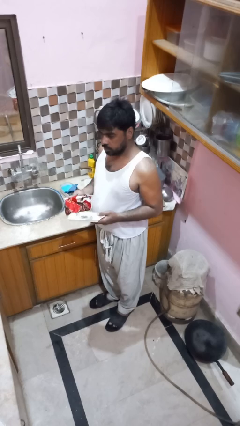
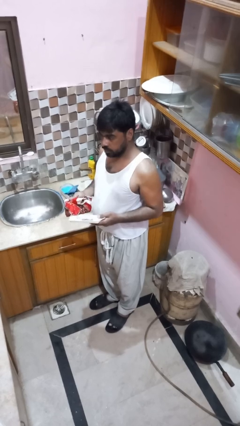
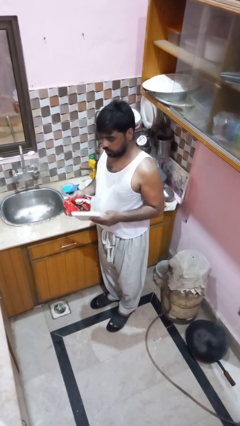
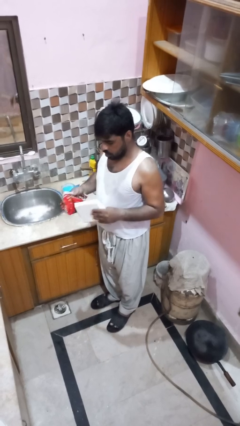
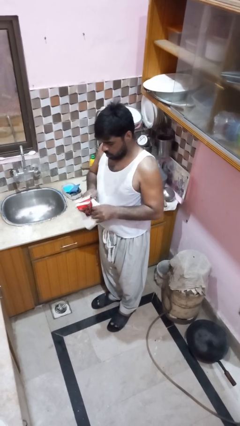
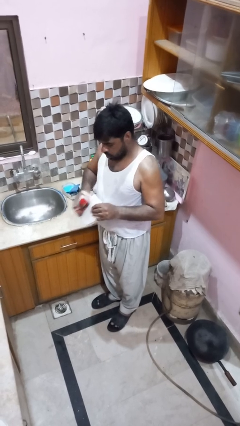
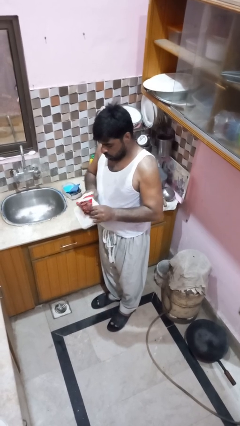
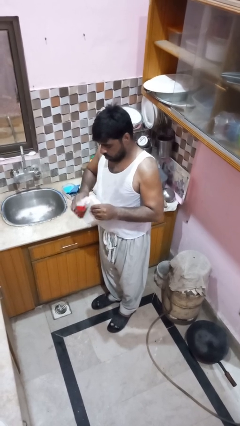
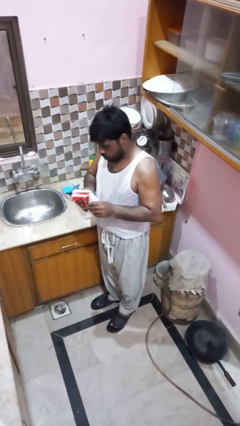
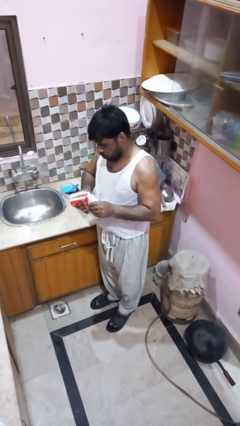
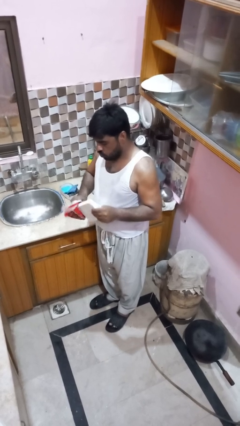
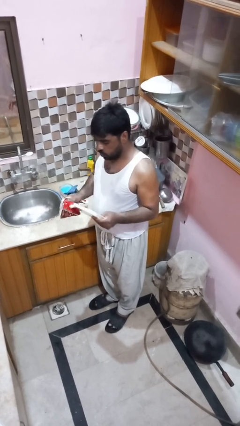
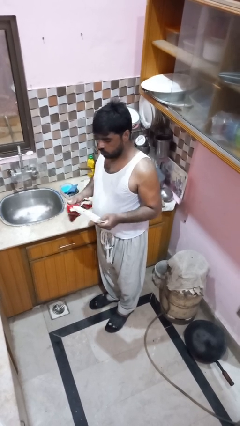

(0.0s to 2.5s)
person dries dish

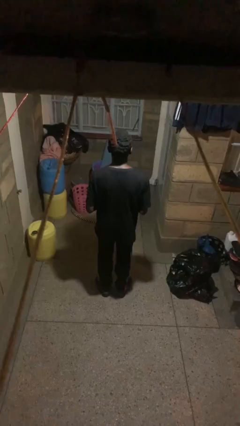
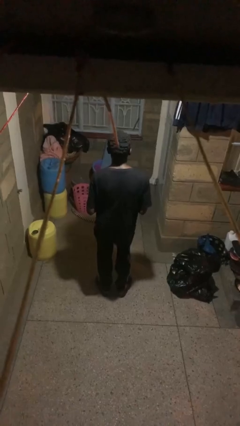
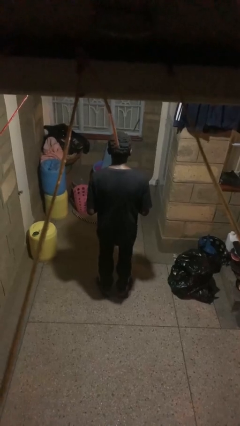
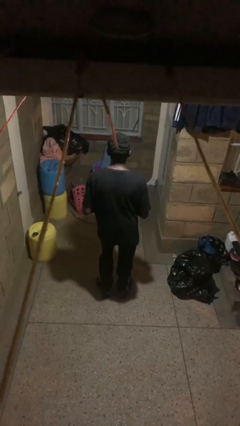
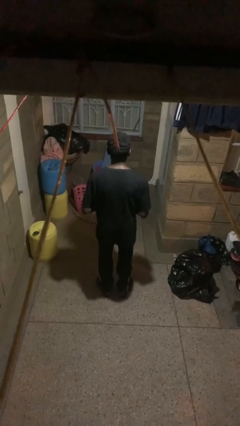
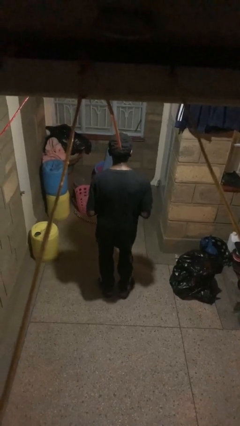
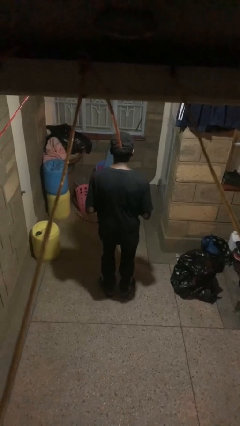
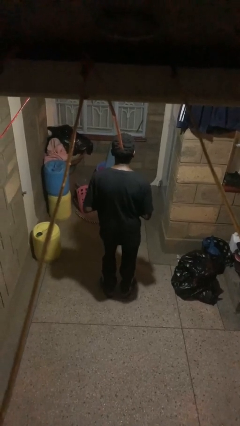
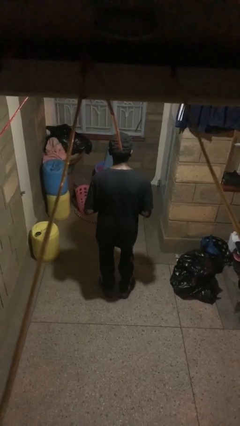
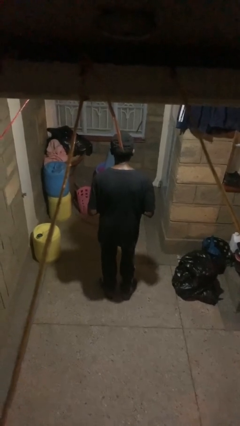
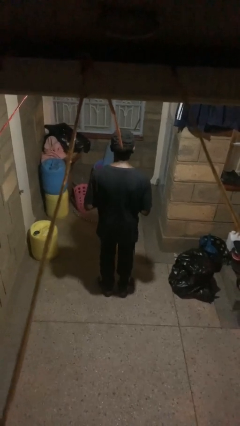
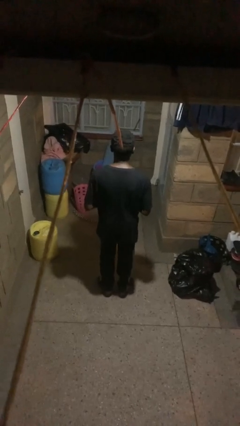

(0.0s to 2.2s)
person wiggles hips

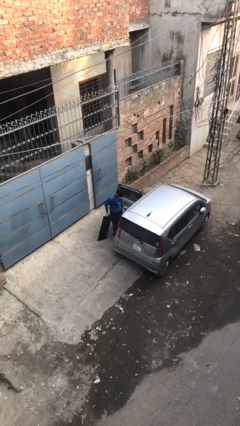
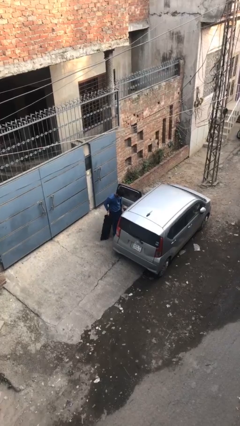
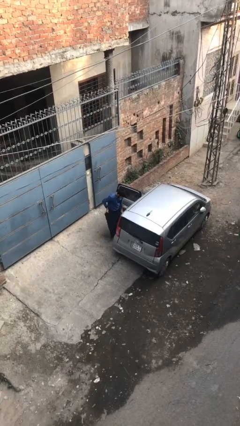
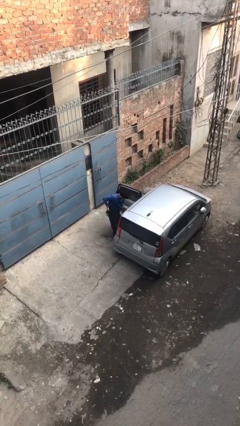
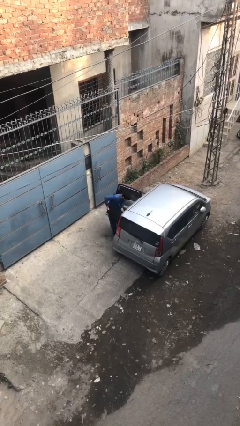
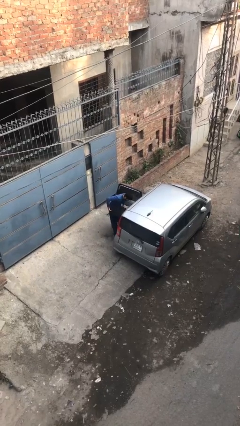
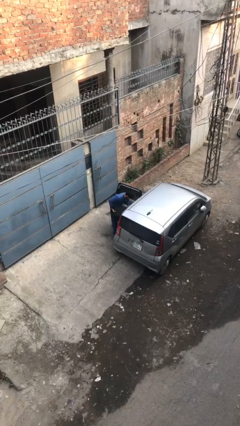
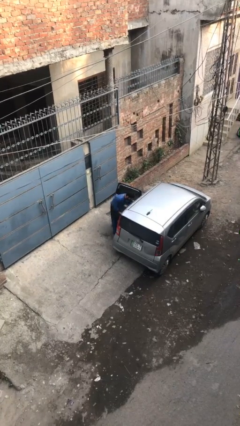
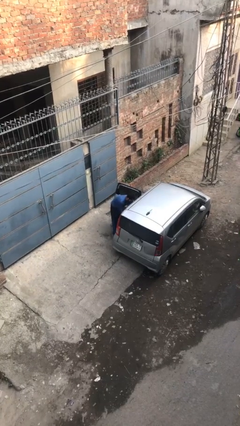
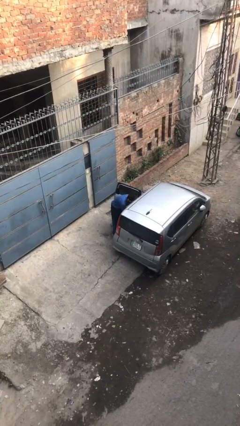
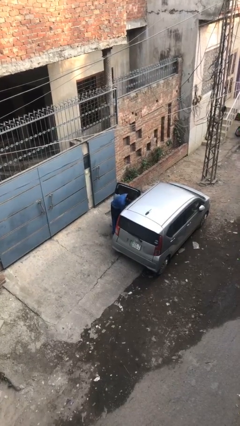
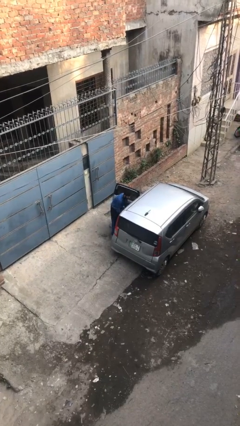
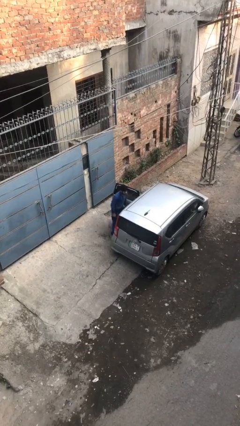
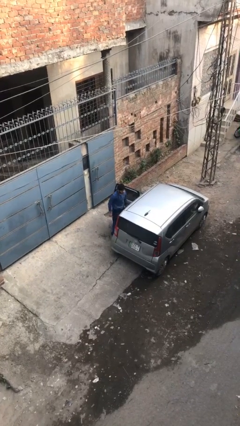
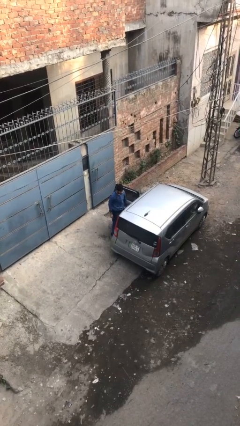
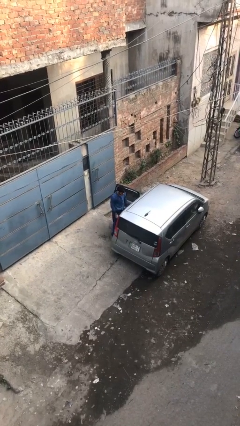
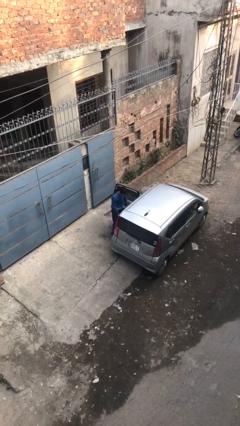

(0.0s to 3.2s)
person loads car

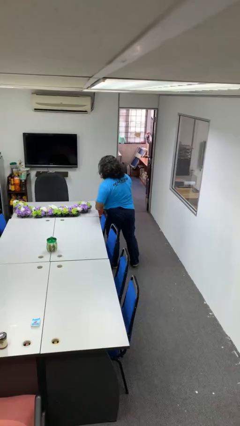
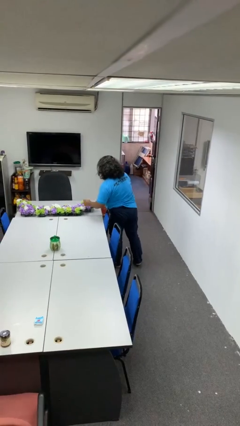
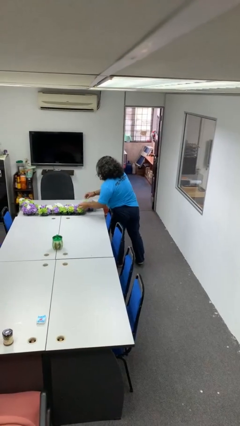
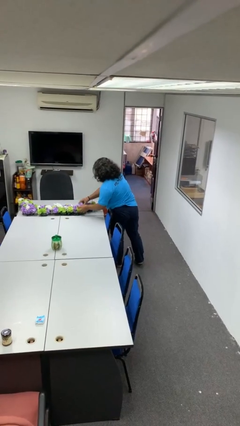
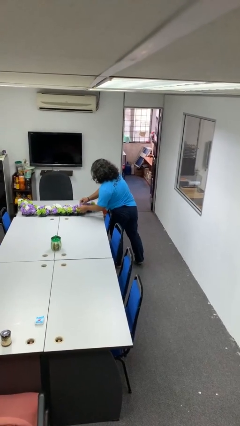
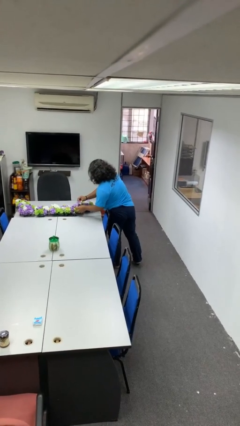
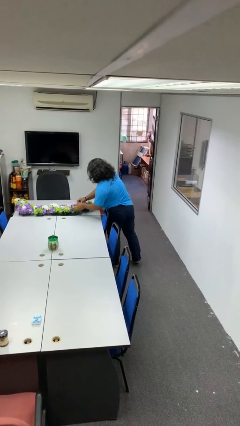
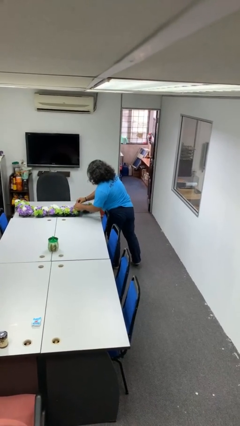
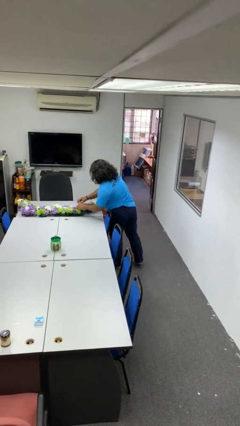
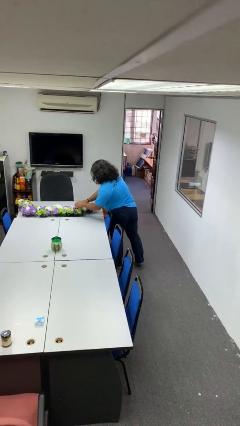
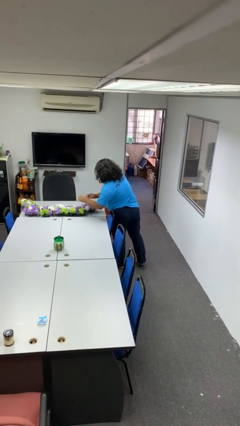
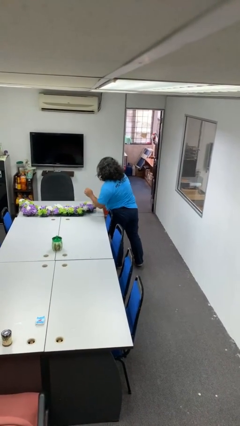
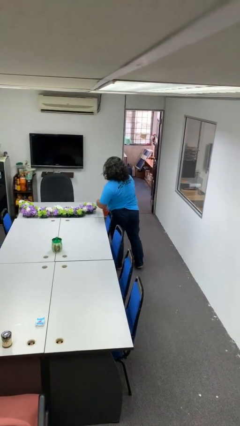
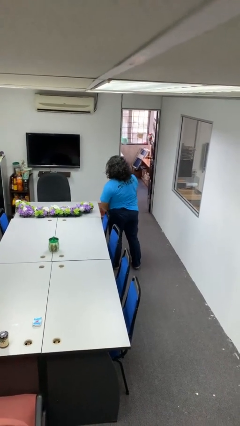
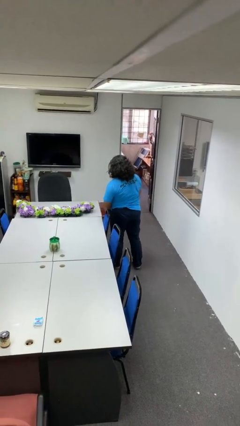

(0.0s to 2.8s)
person arranges flowers in vase

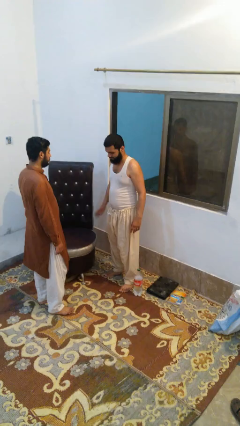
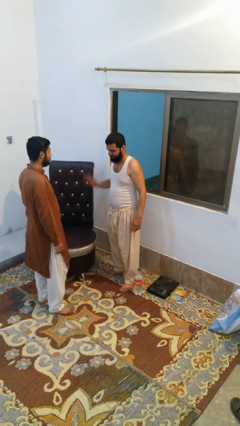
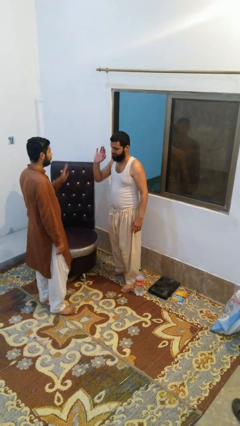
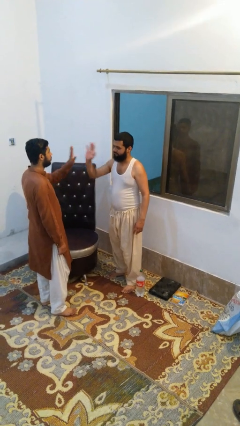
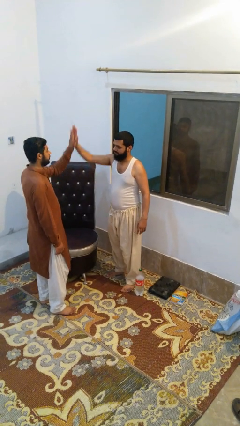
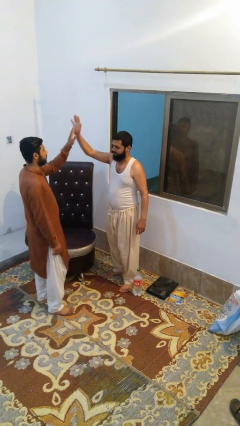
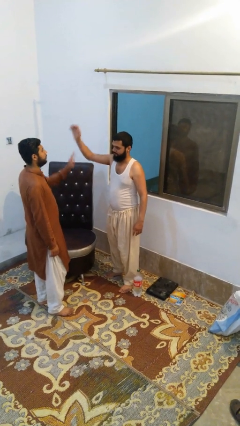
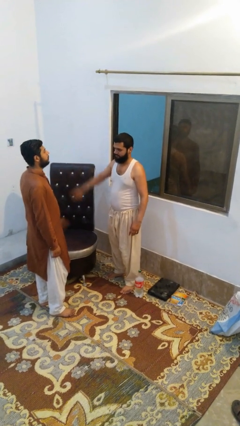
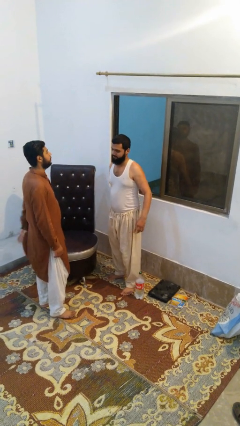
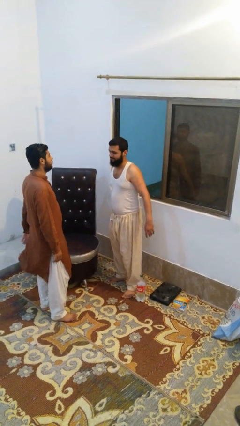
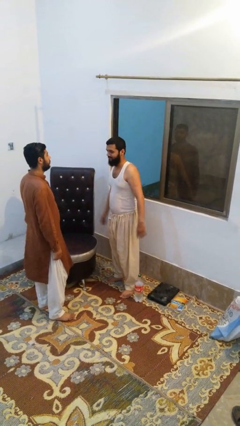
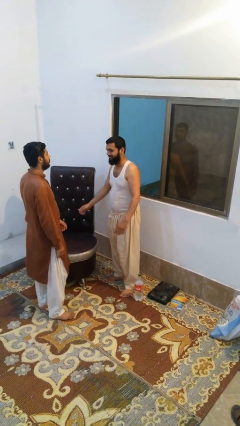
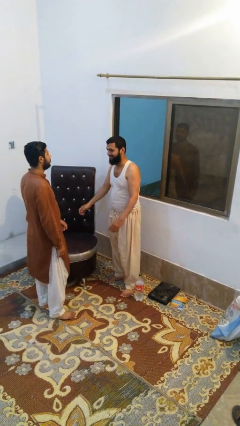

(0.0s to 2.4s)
person highfives hand

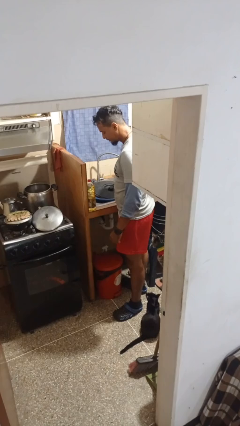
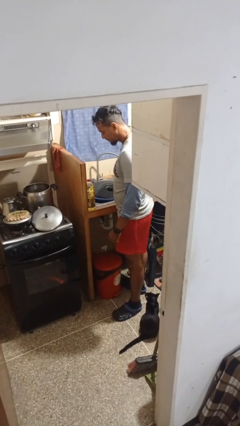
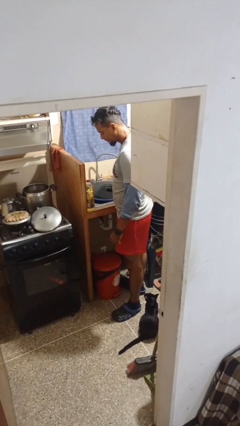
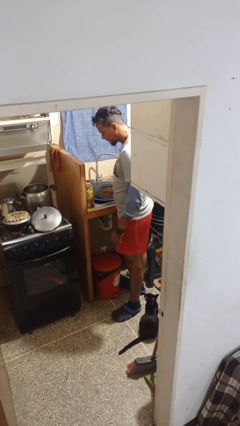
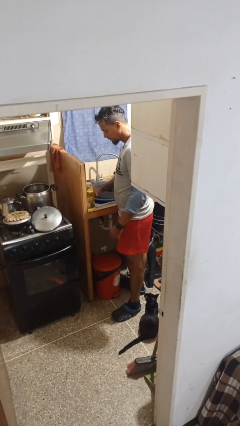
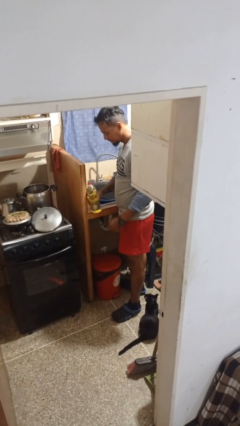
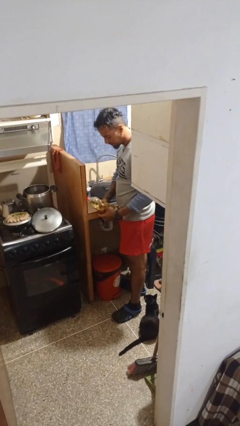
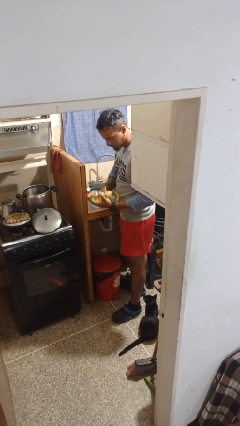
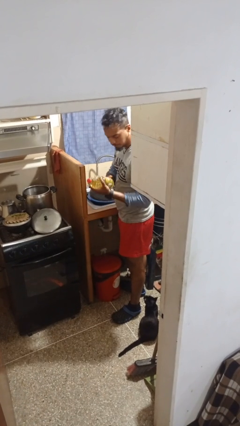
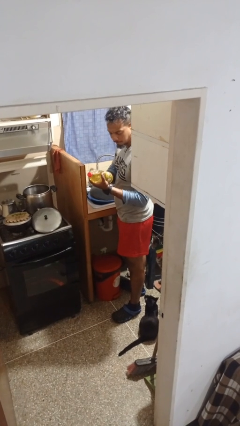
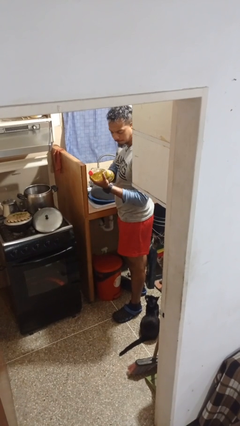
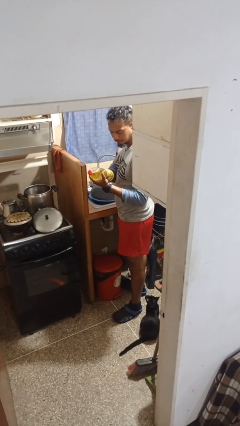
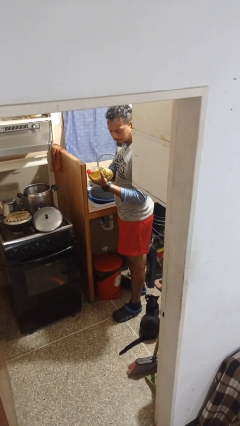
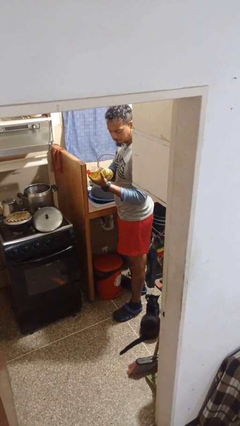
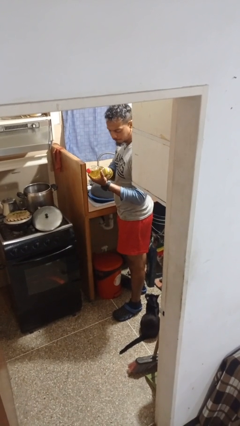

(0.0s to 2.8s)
person picks up object from countertop

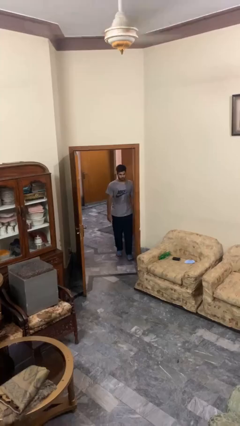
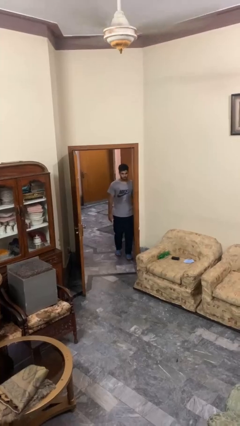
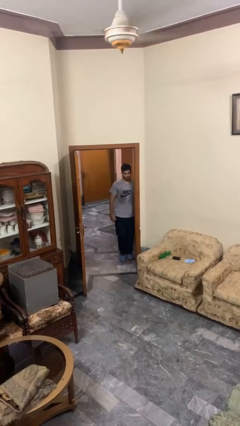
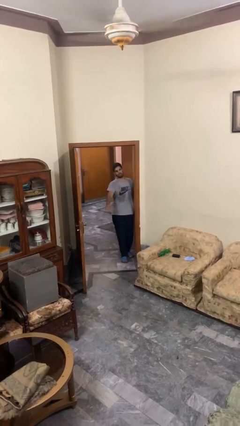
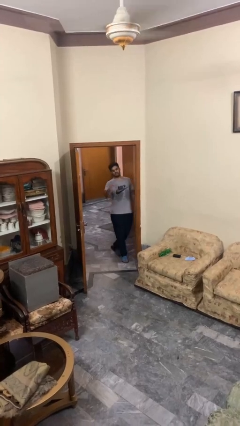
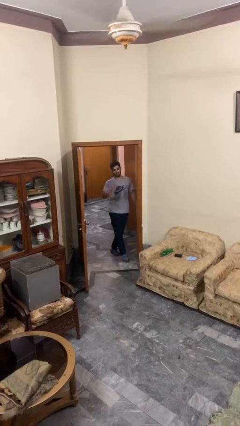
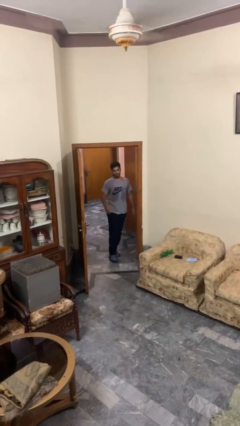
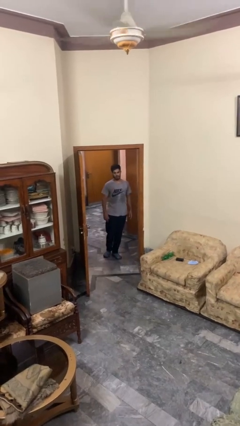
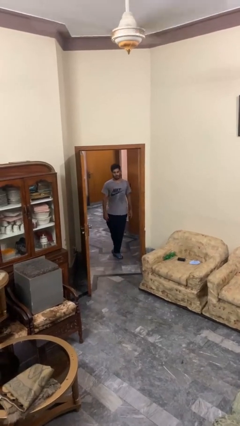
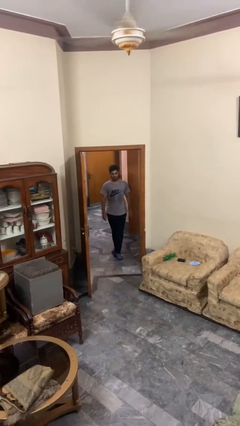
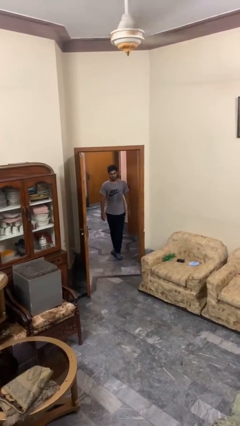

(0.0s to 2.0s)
person bumps into wall
